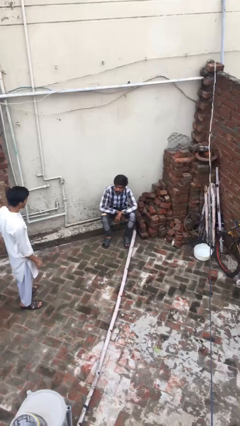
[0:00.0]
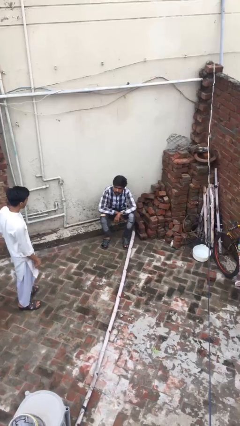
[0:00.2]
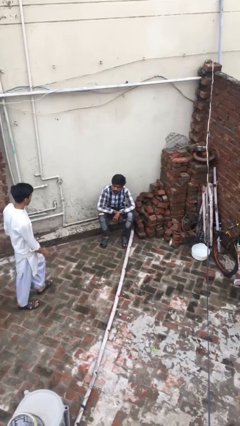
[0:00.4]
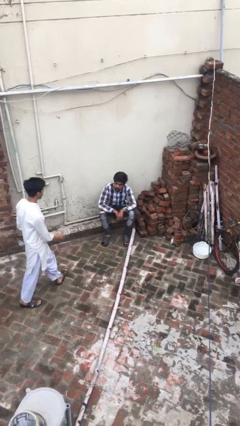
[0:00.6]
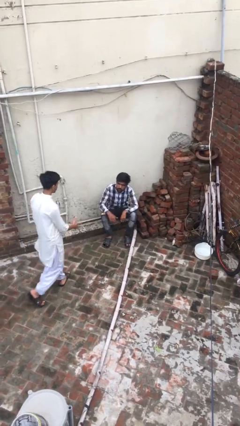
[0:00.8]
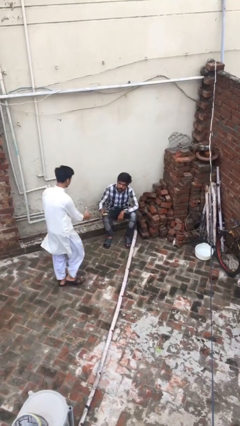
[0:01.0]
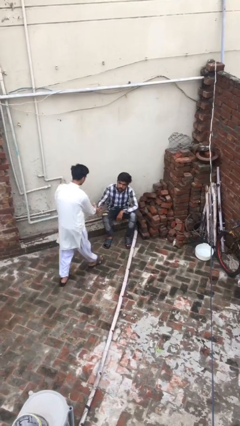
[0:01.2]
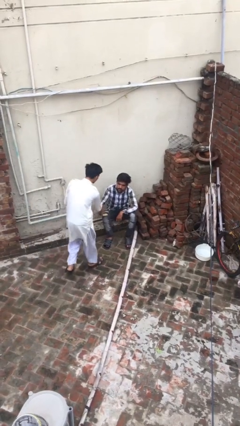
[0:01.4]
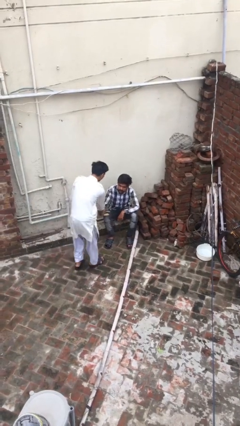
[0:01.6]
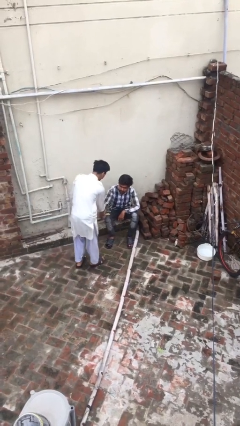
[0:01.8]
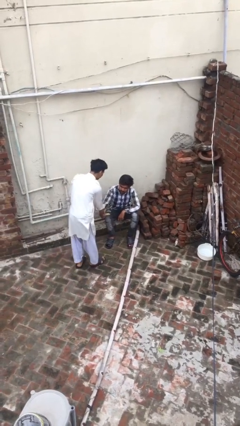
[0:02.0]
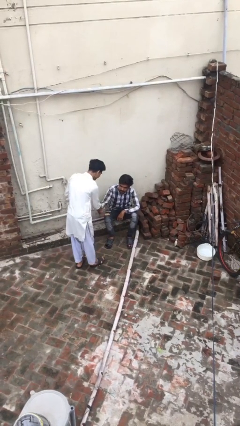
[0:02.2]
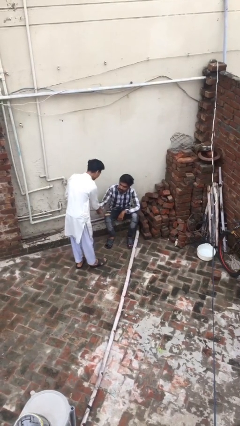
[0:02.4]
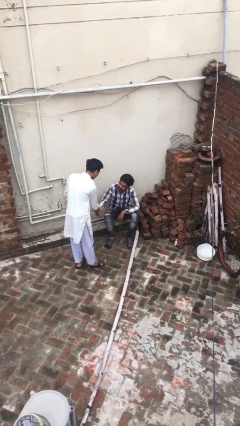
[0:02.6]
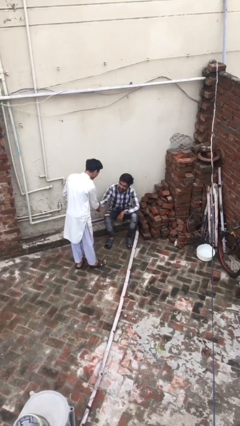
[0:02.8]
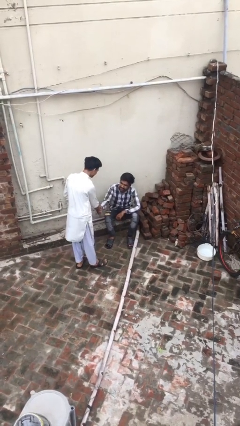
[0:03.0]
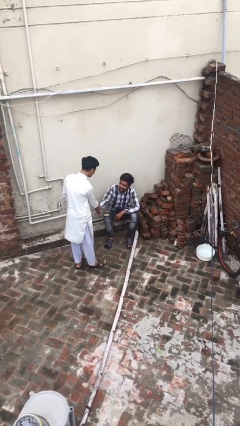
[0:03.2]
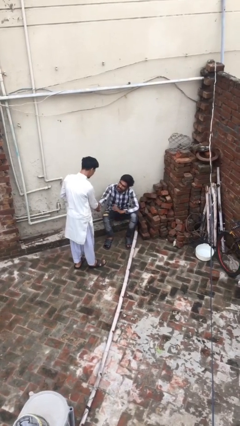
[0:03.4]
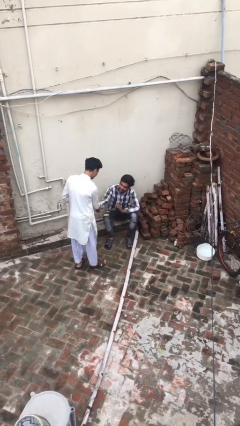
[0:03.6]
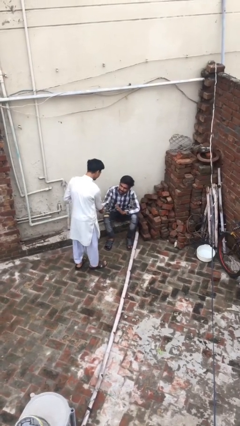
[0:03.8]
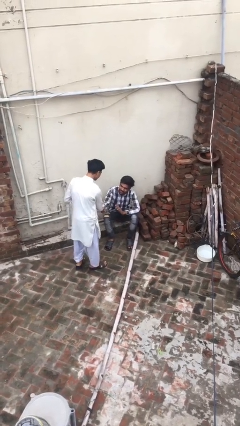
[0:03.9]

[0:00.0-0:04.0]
person shakes hand

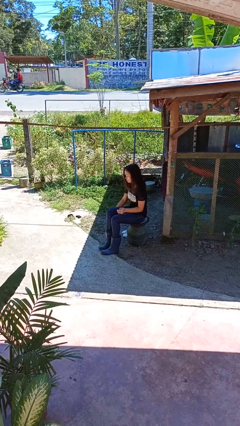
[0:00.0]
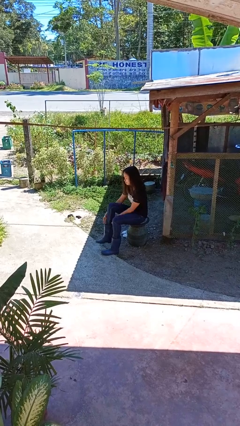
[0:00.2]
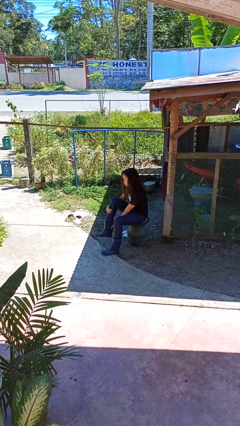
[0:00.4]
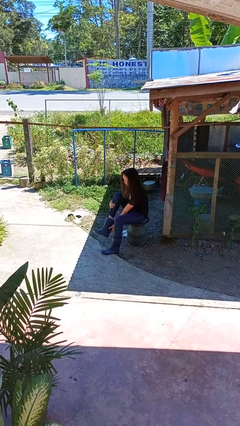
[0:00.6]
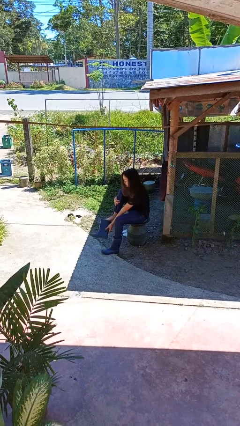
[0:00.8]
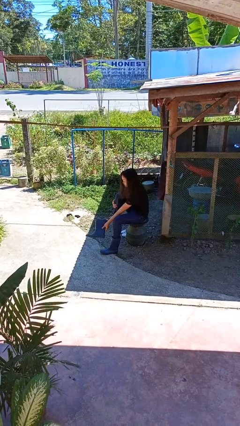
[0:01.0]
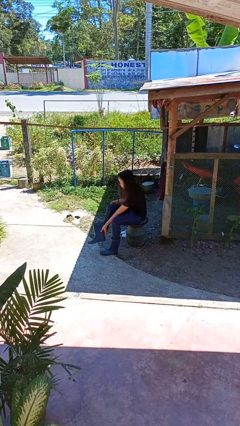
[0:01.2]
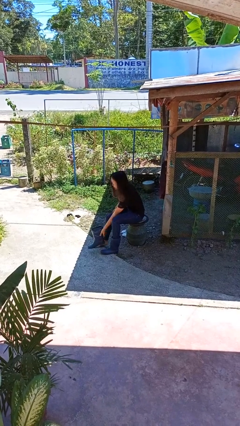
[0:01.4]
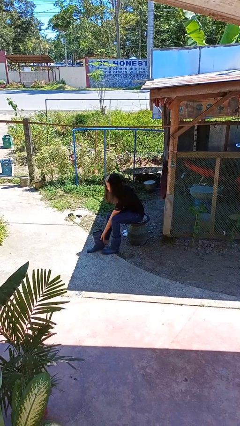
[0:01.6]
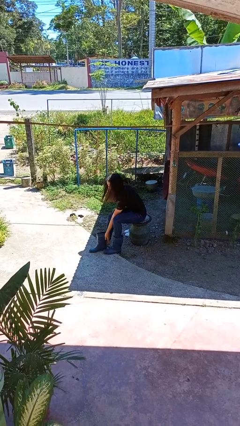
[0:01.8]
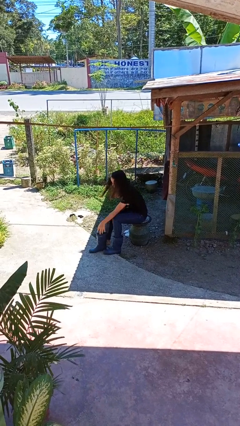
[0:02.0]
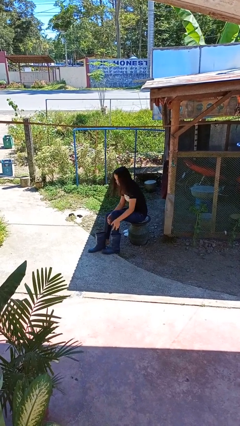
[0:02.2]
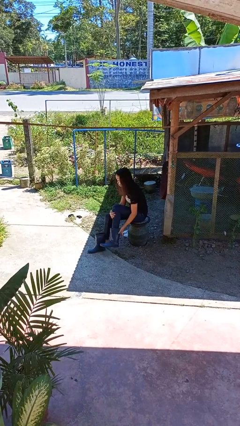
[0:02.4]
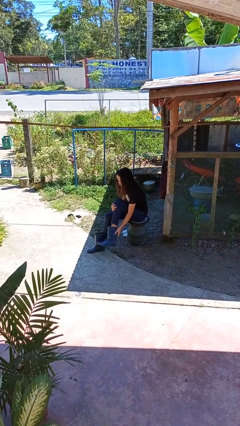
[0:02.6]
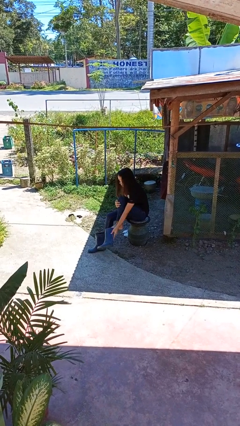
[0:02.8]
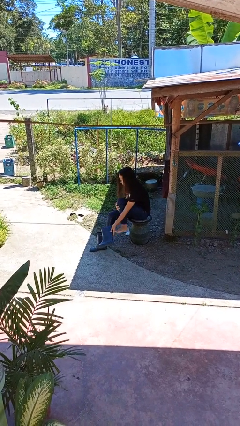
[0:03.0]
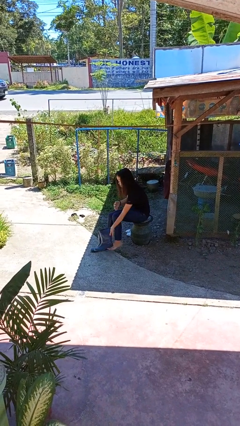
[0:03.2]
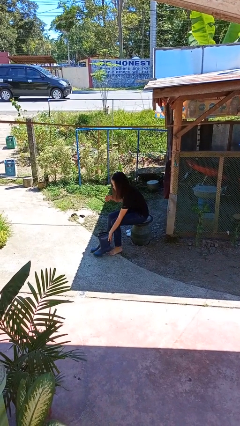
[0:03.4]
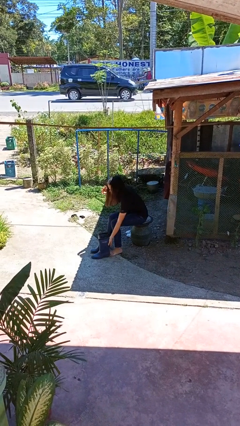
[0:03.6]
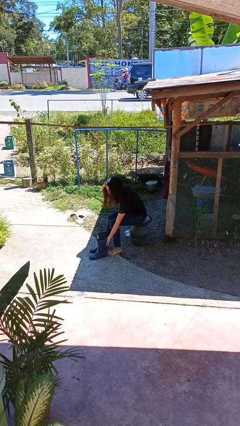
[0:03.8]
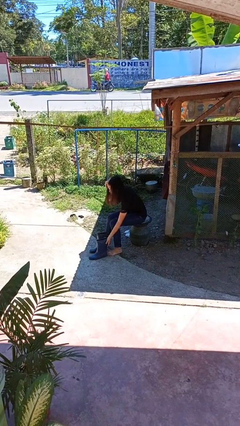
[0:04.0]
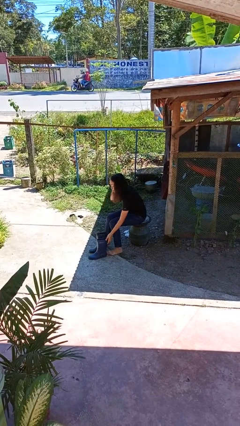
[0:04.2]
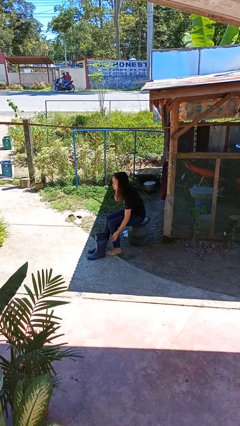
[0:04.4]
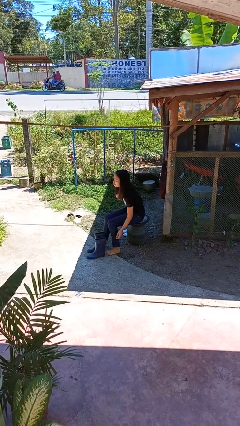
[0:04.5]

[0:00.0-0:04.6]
person takes off boots

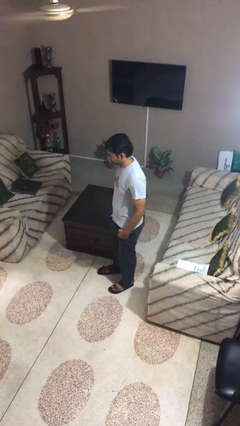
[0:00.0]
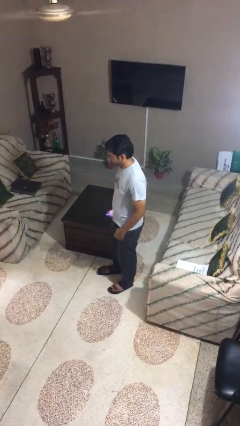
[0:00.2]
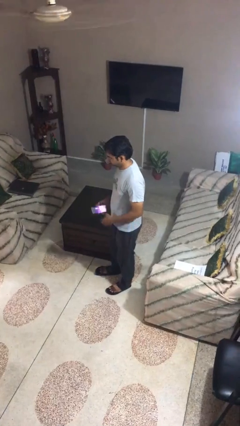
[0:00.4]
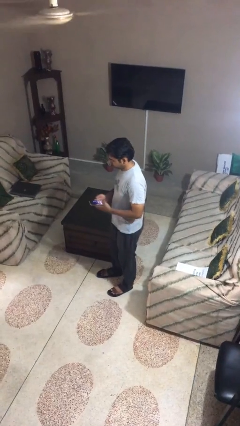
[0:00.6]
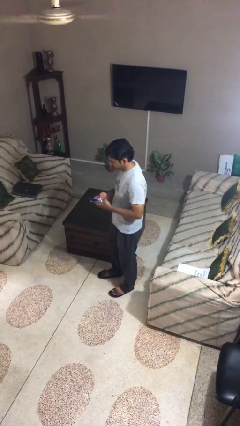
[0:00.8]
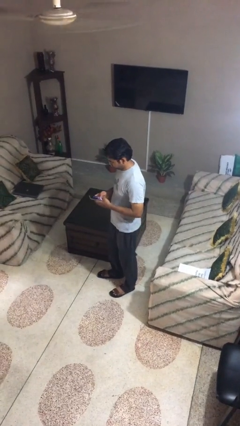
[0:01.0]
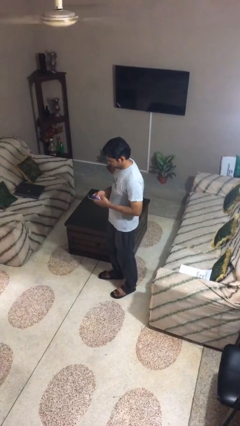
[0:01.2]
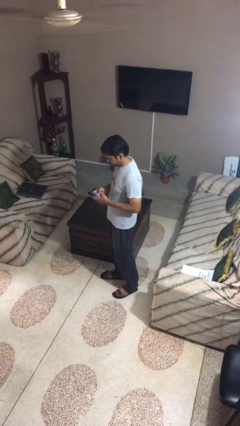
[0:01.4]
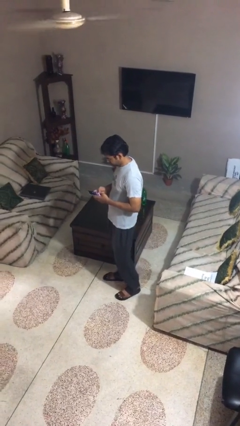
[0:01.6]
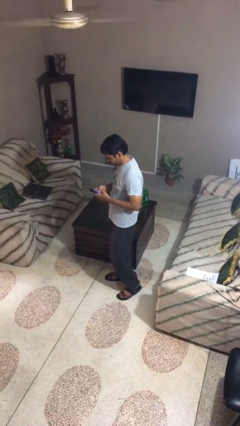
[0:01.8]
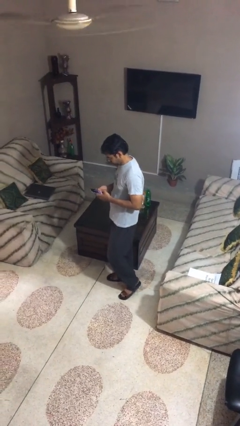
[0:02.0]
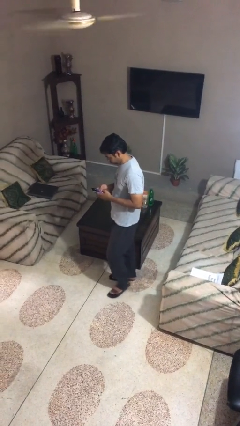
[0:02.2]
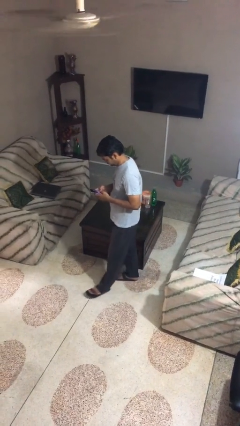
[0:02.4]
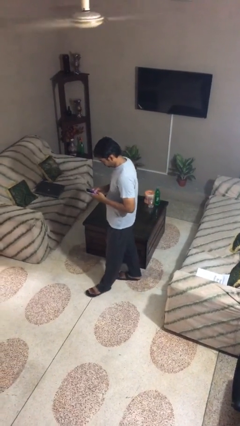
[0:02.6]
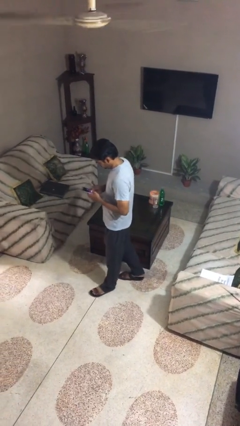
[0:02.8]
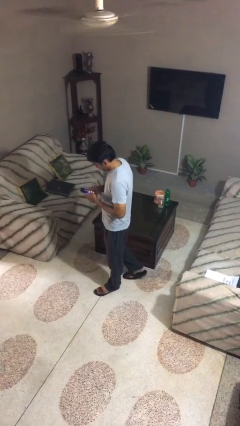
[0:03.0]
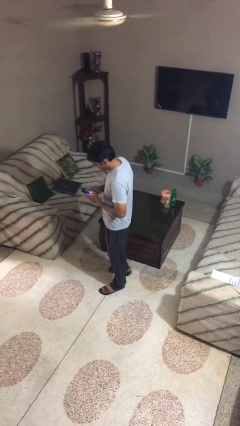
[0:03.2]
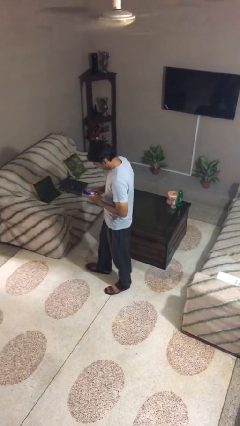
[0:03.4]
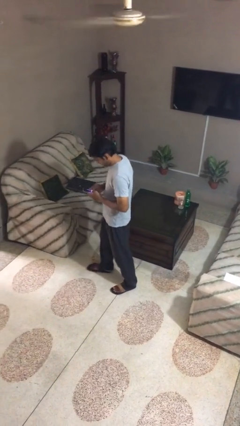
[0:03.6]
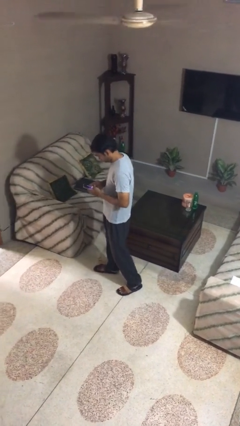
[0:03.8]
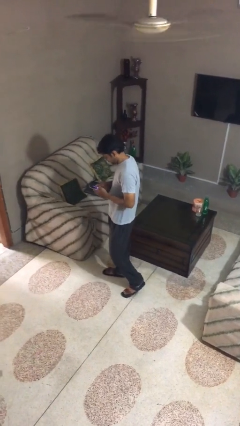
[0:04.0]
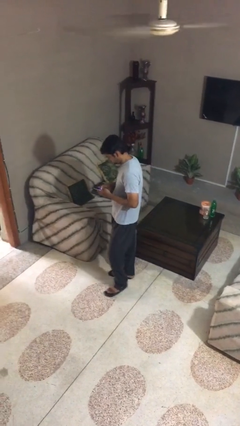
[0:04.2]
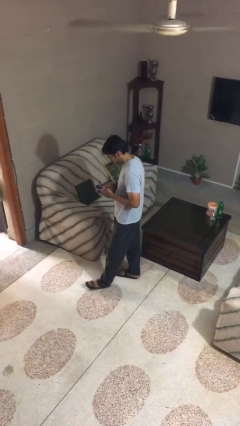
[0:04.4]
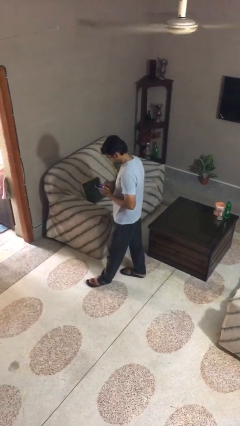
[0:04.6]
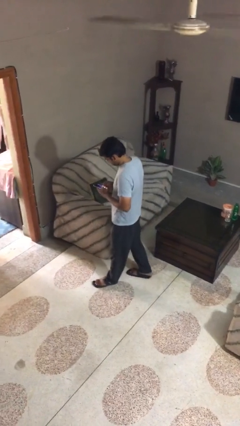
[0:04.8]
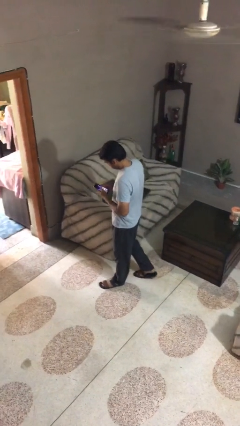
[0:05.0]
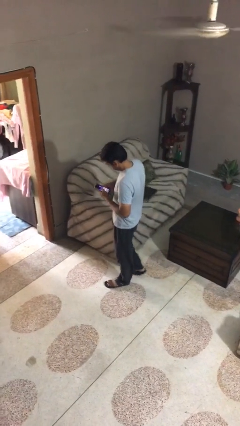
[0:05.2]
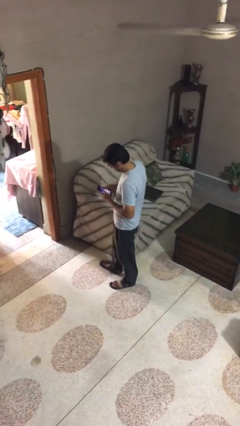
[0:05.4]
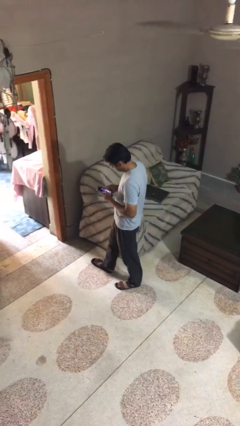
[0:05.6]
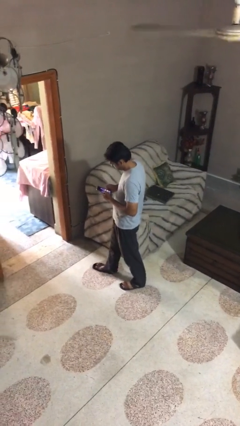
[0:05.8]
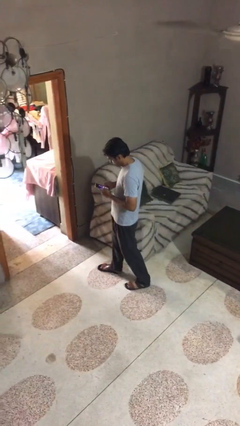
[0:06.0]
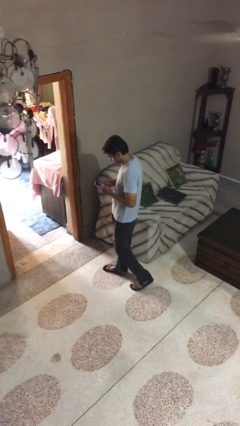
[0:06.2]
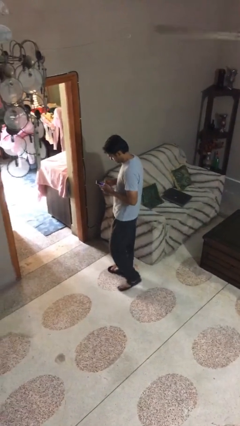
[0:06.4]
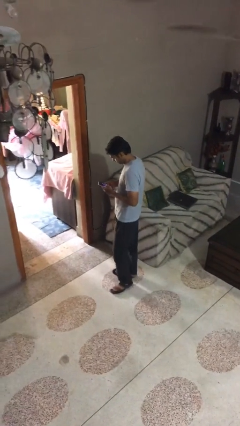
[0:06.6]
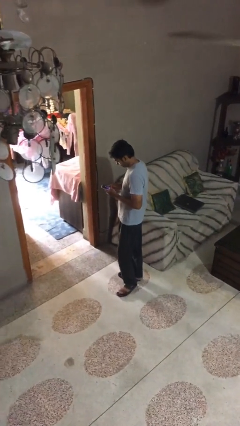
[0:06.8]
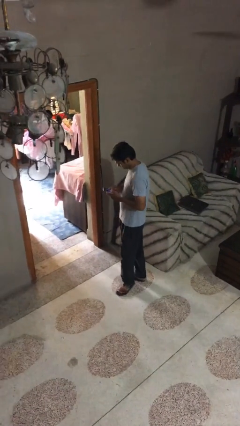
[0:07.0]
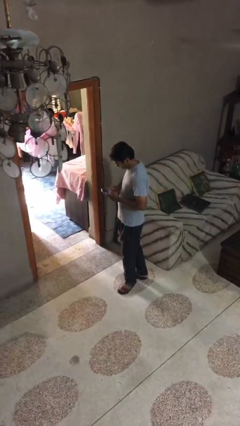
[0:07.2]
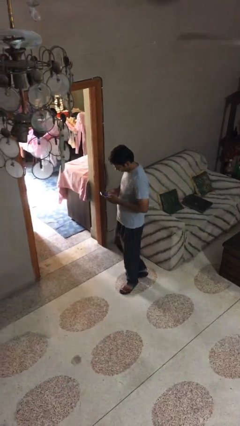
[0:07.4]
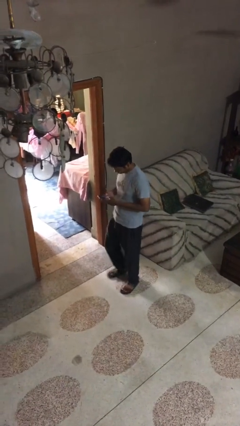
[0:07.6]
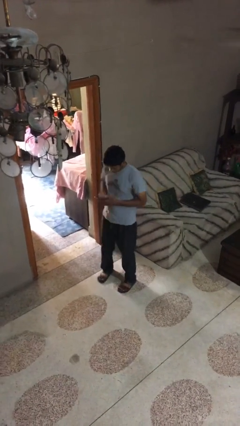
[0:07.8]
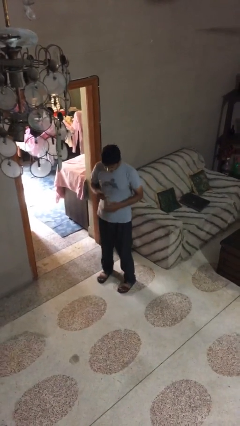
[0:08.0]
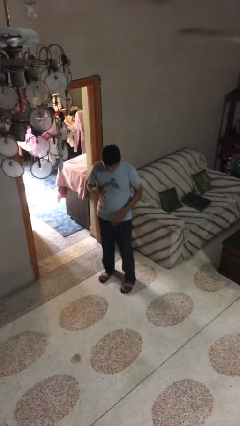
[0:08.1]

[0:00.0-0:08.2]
person texts on phone

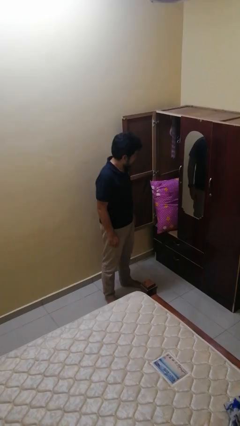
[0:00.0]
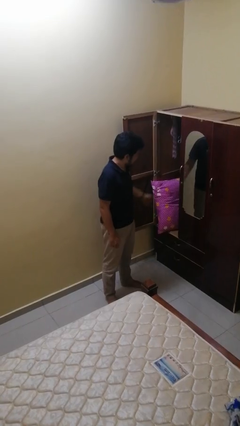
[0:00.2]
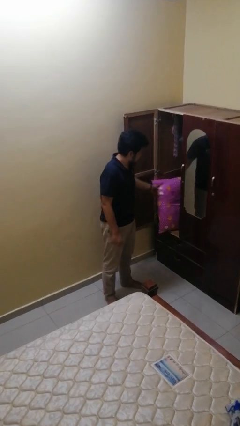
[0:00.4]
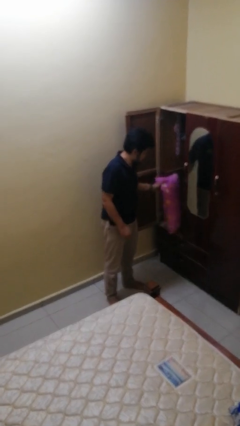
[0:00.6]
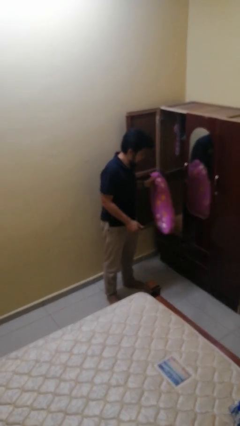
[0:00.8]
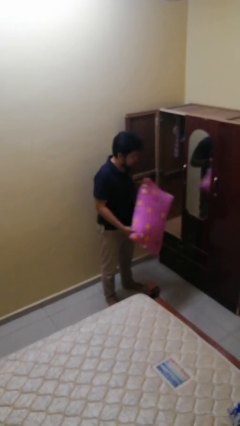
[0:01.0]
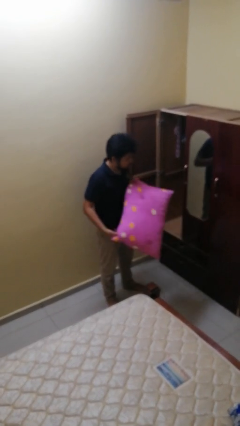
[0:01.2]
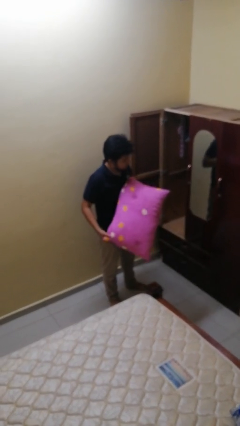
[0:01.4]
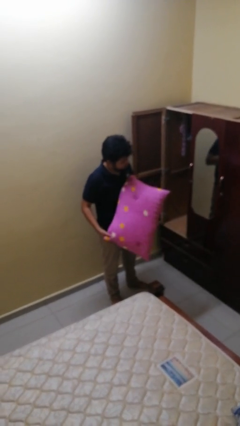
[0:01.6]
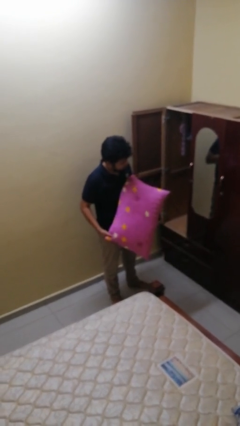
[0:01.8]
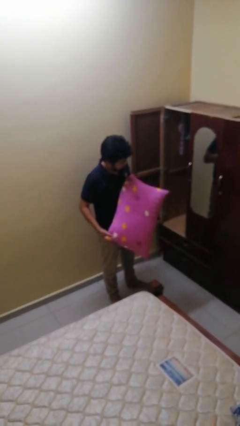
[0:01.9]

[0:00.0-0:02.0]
person picks up object from cabinet
